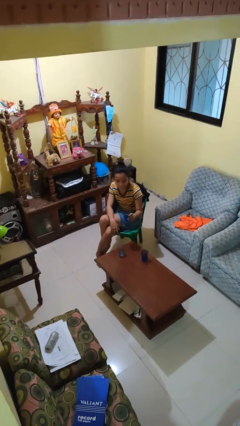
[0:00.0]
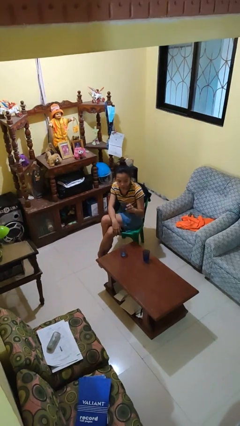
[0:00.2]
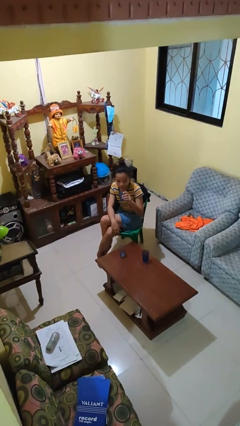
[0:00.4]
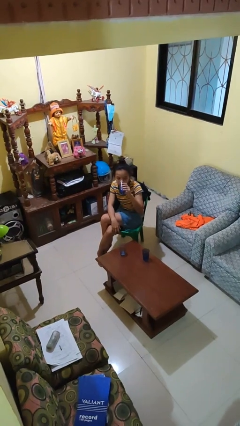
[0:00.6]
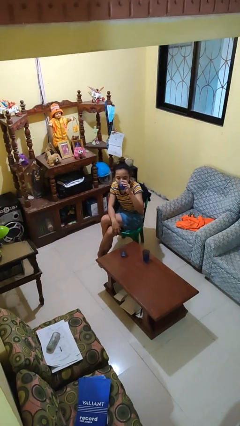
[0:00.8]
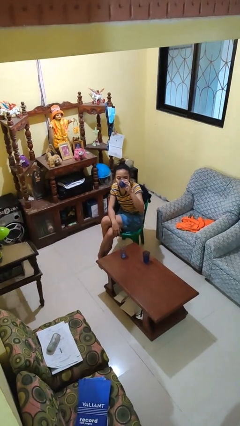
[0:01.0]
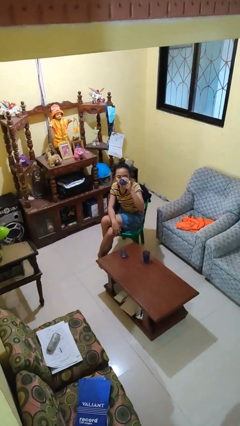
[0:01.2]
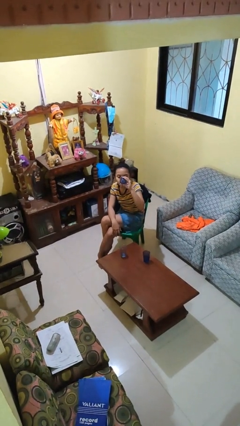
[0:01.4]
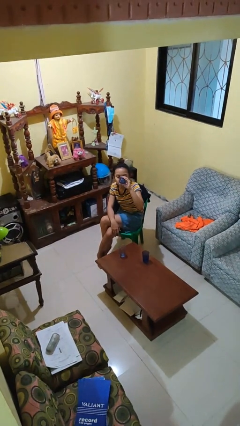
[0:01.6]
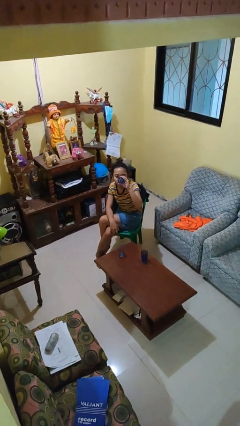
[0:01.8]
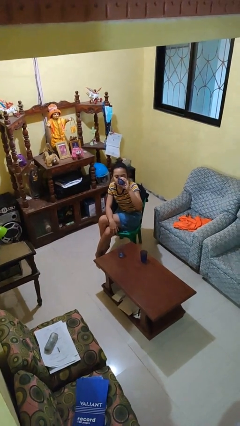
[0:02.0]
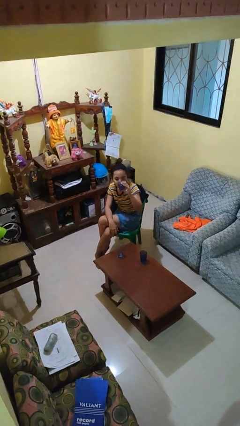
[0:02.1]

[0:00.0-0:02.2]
person drinks from shotglass

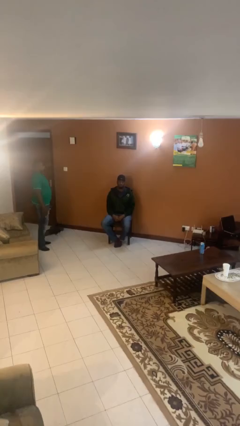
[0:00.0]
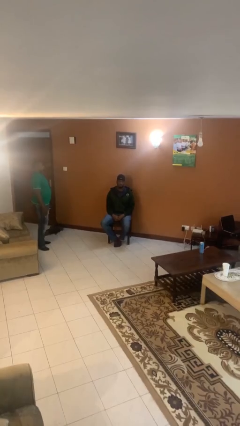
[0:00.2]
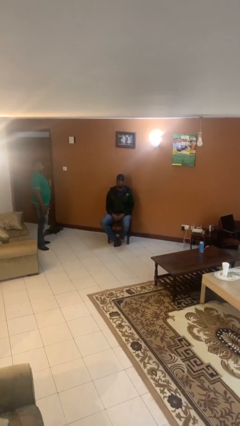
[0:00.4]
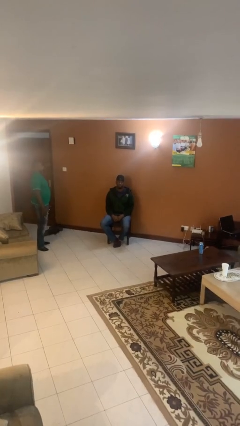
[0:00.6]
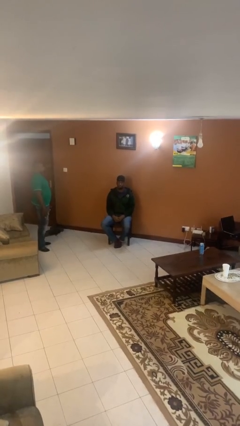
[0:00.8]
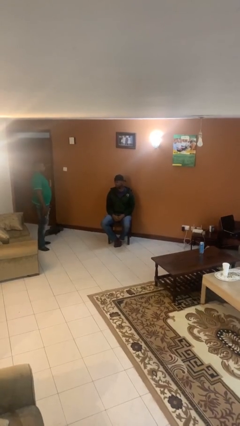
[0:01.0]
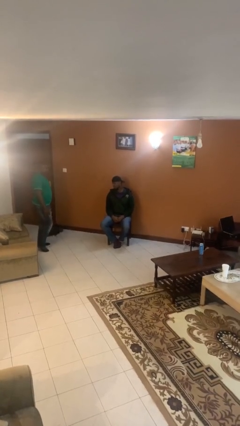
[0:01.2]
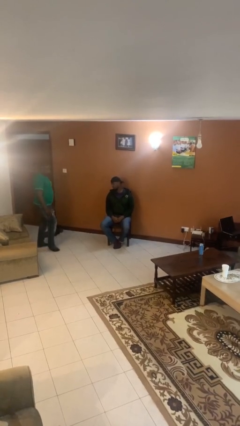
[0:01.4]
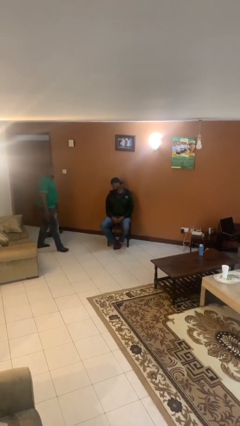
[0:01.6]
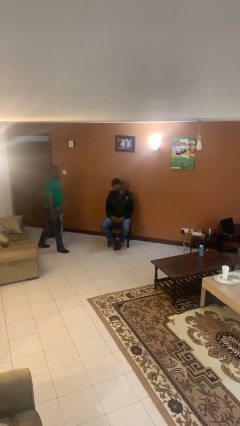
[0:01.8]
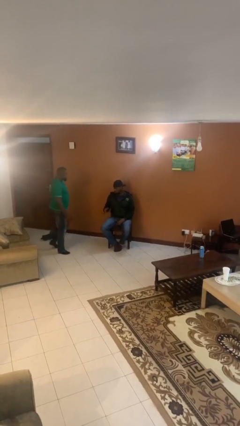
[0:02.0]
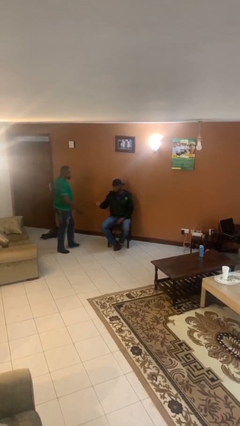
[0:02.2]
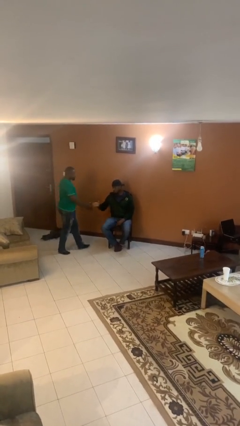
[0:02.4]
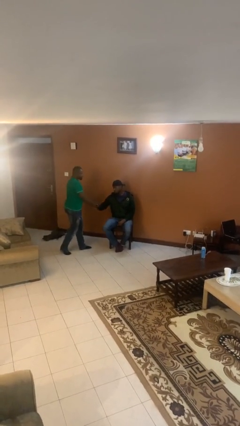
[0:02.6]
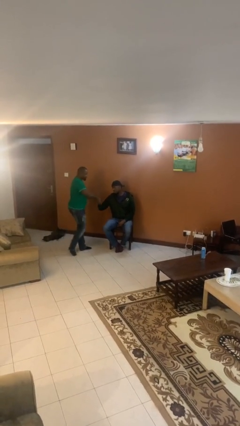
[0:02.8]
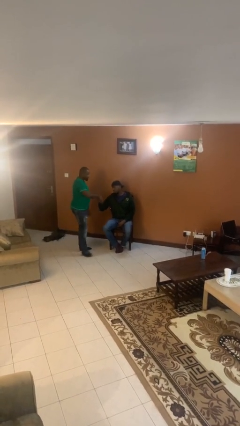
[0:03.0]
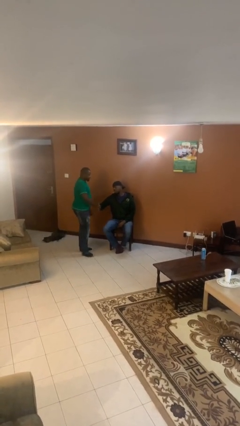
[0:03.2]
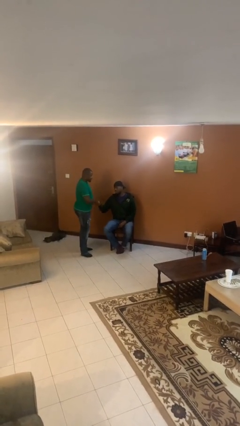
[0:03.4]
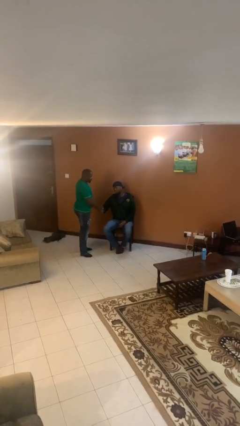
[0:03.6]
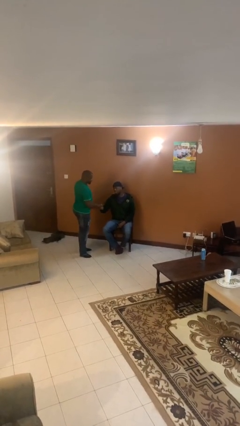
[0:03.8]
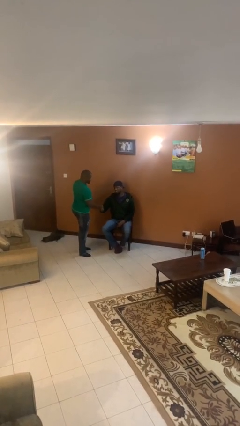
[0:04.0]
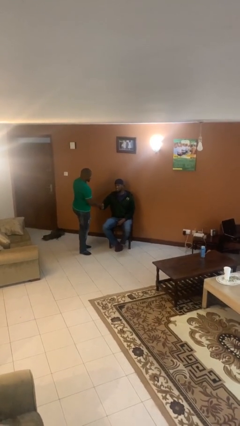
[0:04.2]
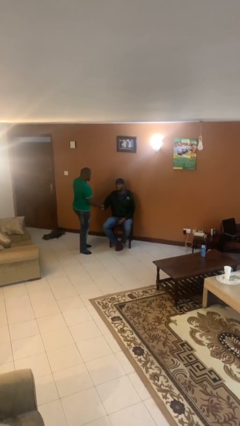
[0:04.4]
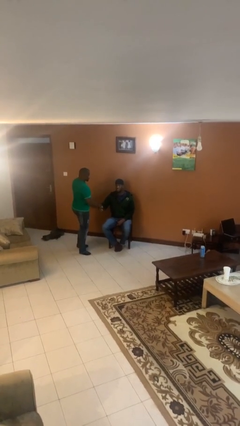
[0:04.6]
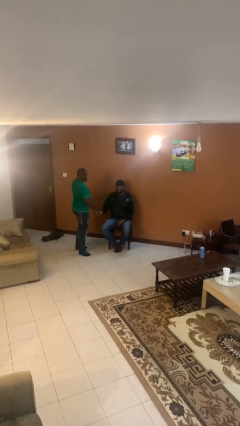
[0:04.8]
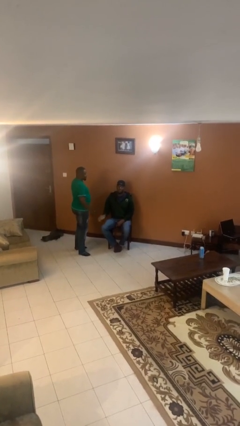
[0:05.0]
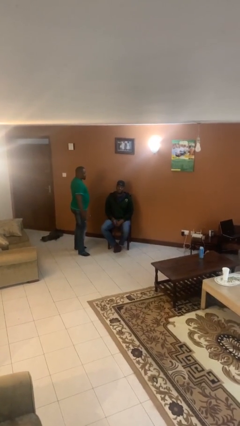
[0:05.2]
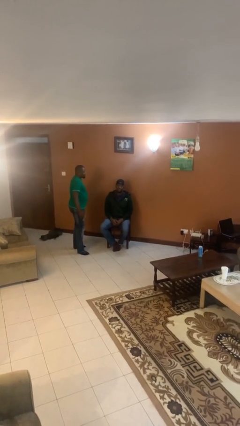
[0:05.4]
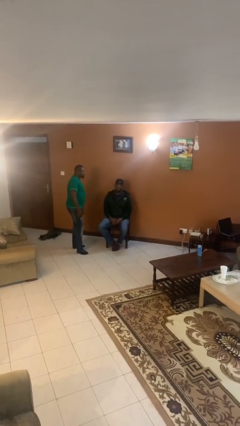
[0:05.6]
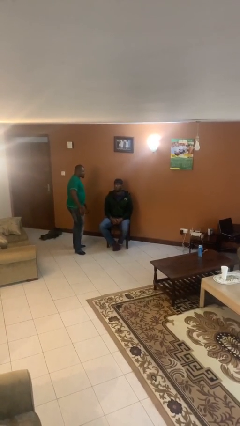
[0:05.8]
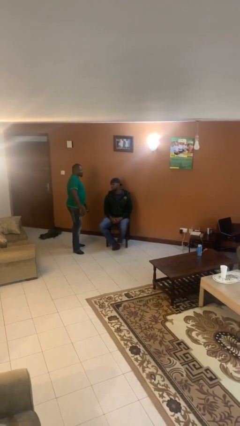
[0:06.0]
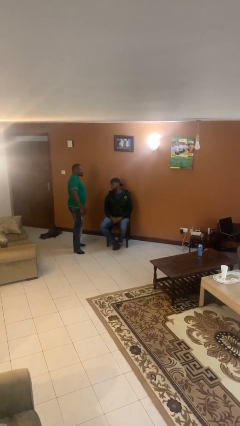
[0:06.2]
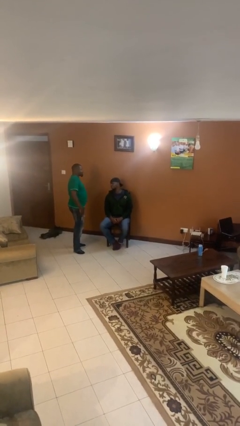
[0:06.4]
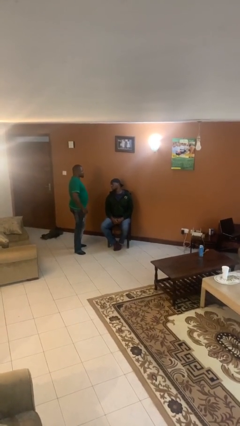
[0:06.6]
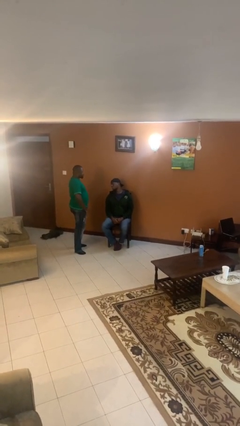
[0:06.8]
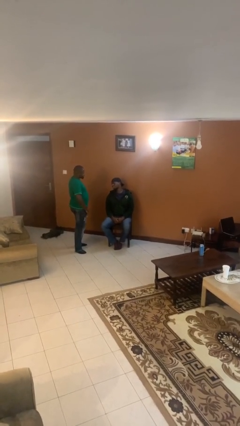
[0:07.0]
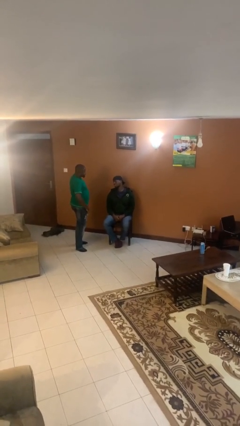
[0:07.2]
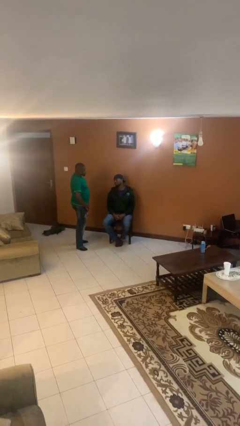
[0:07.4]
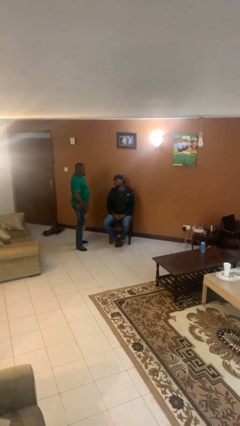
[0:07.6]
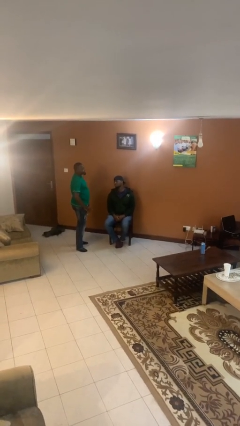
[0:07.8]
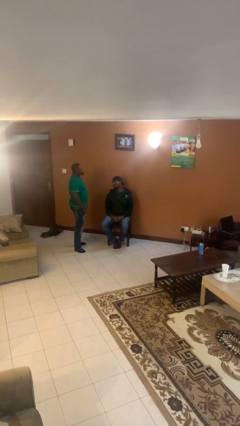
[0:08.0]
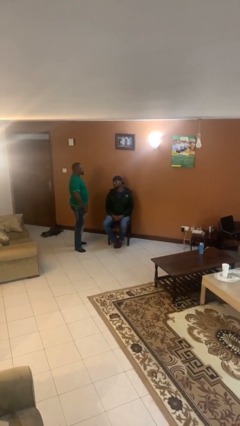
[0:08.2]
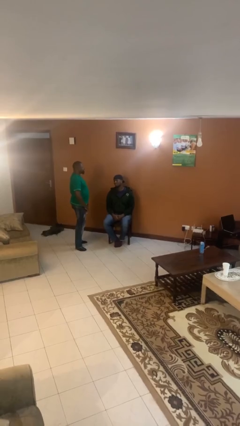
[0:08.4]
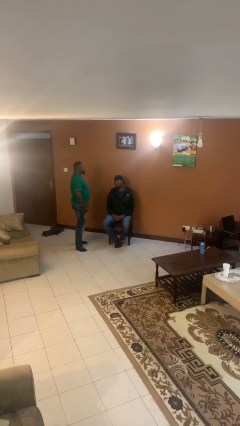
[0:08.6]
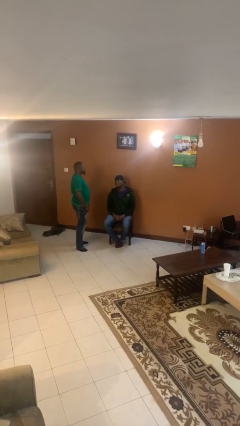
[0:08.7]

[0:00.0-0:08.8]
person shakes hand

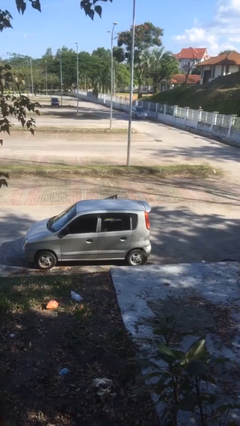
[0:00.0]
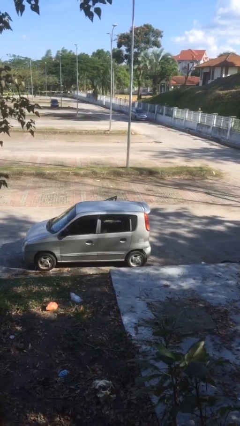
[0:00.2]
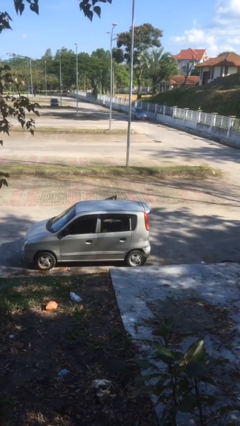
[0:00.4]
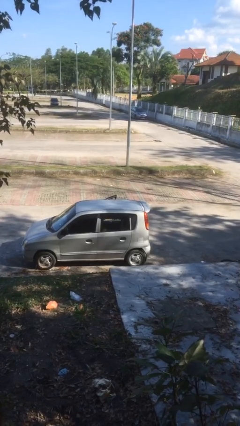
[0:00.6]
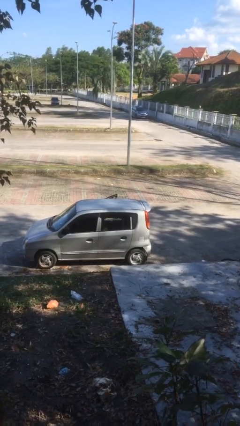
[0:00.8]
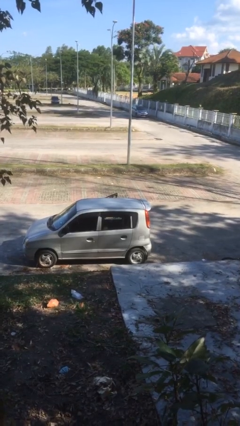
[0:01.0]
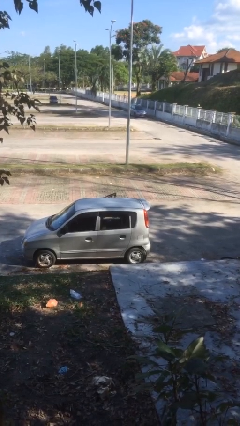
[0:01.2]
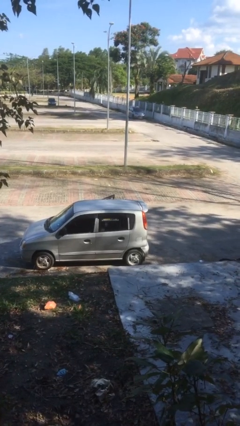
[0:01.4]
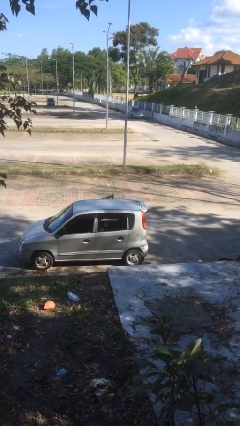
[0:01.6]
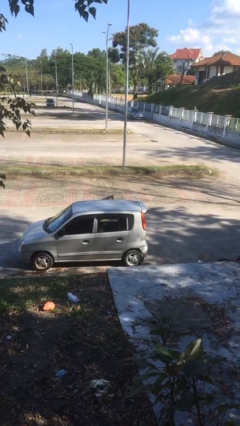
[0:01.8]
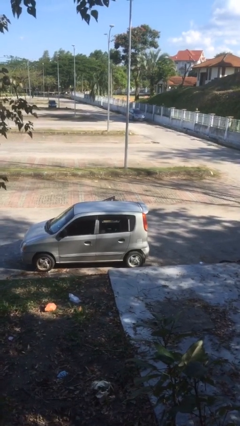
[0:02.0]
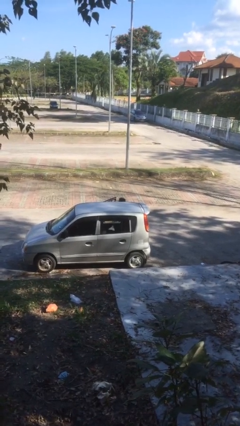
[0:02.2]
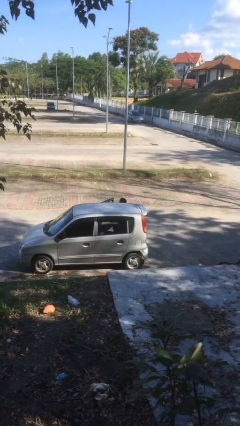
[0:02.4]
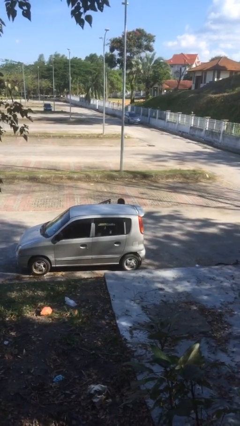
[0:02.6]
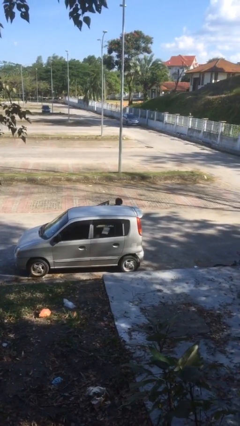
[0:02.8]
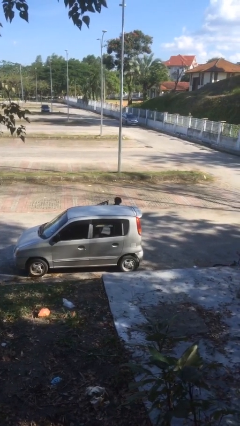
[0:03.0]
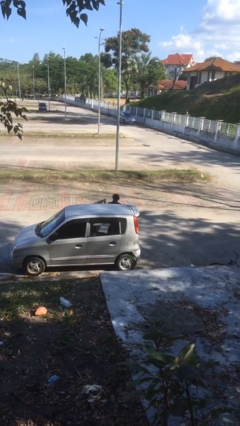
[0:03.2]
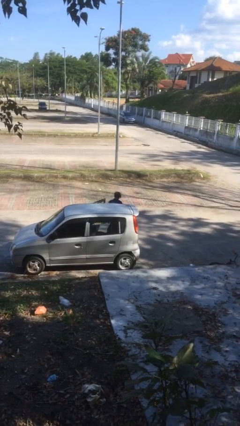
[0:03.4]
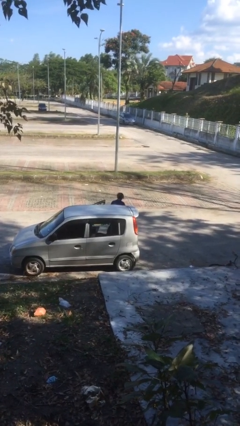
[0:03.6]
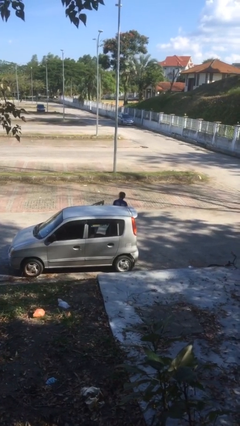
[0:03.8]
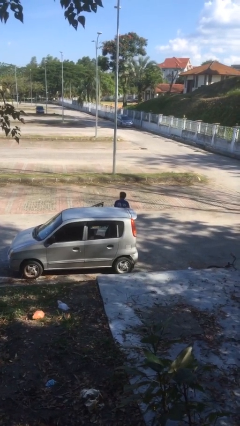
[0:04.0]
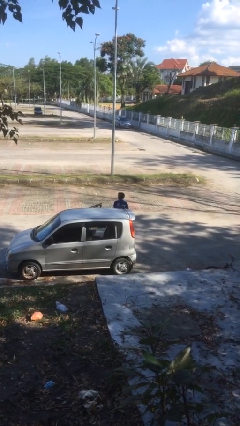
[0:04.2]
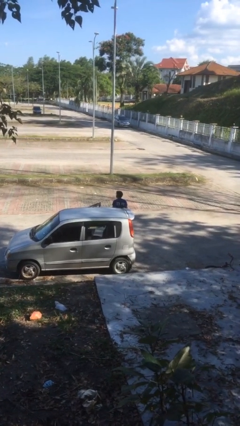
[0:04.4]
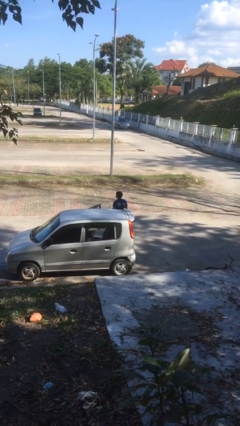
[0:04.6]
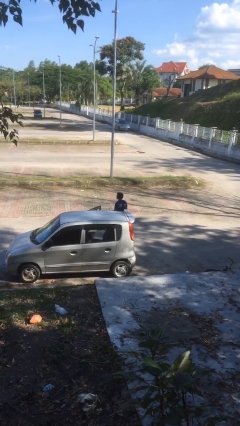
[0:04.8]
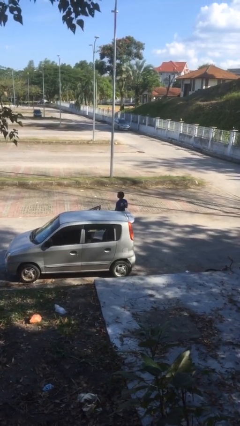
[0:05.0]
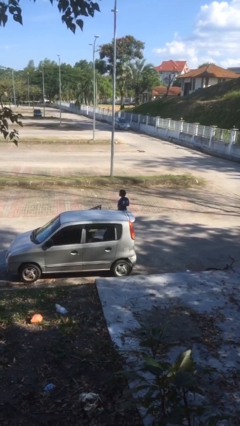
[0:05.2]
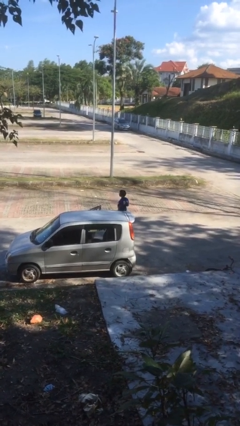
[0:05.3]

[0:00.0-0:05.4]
person exits car

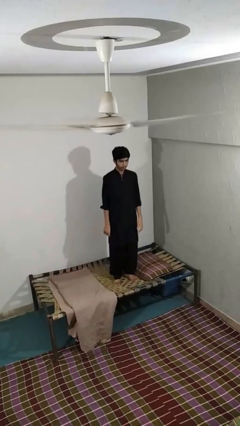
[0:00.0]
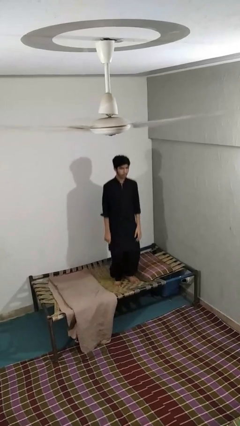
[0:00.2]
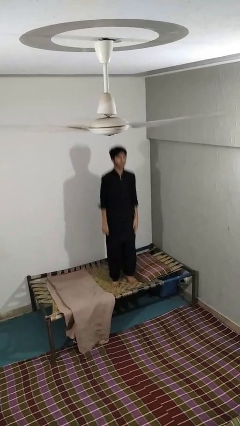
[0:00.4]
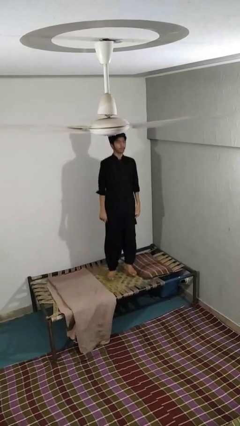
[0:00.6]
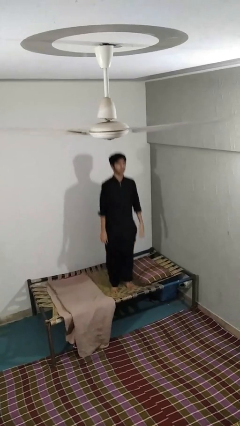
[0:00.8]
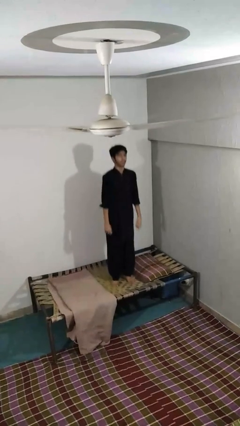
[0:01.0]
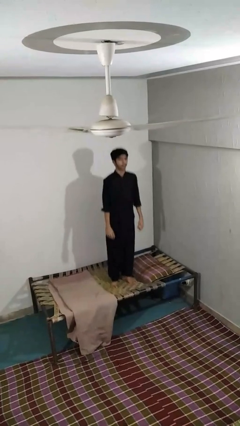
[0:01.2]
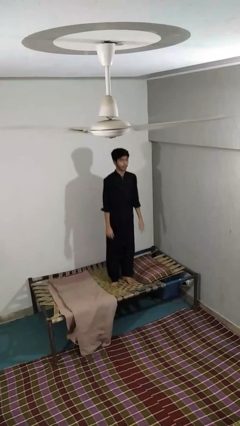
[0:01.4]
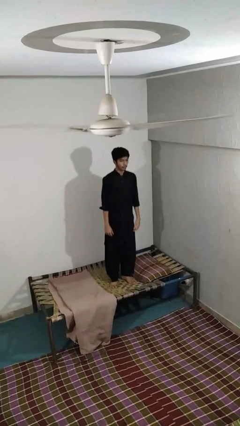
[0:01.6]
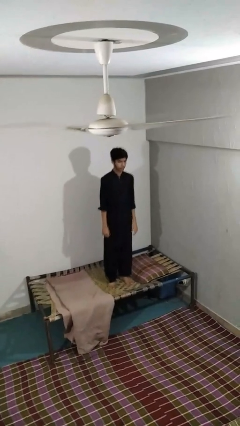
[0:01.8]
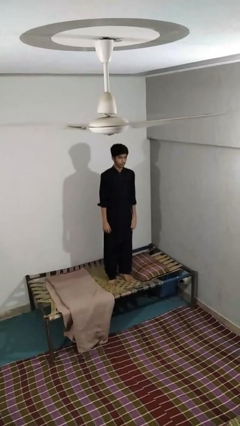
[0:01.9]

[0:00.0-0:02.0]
person jumps on bed
